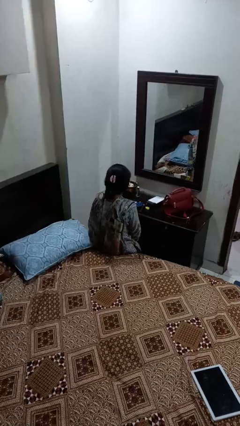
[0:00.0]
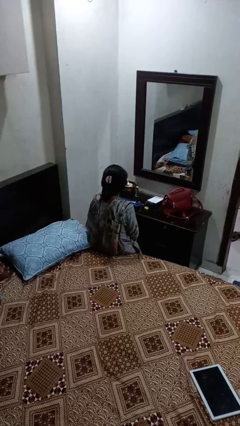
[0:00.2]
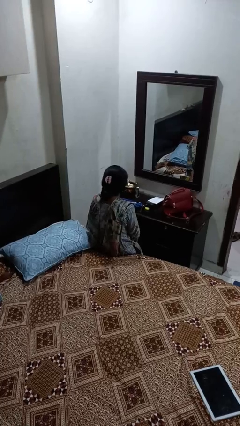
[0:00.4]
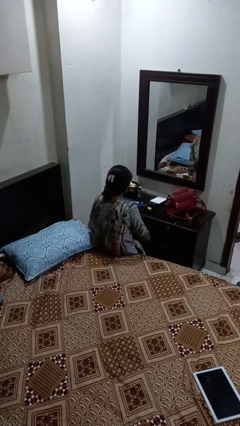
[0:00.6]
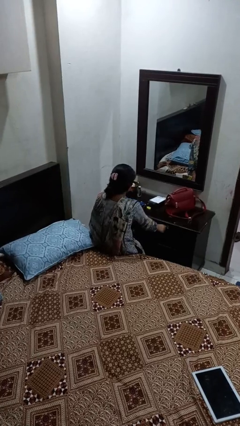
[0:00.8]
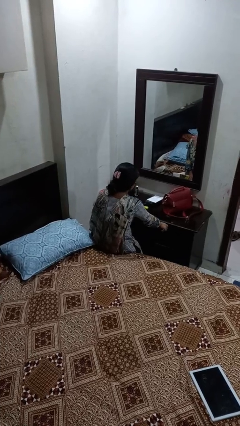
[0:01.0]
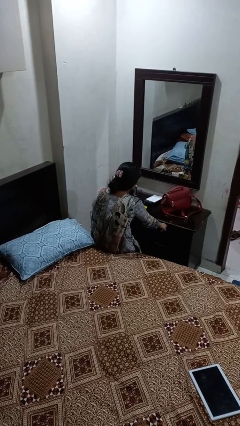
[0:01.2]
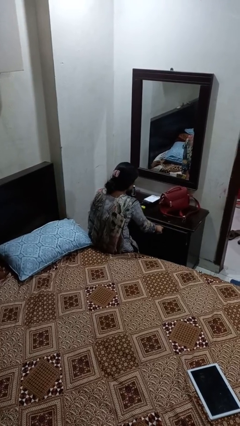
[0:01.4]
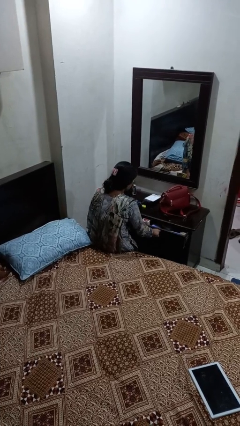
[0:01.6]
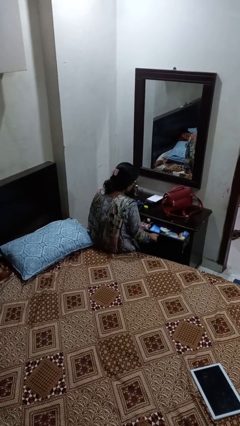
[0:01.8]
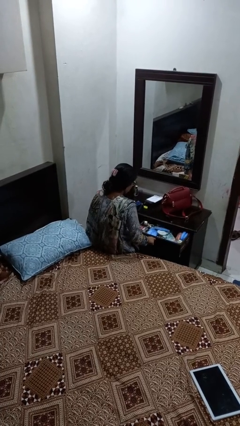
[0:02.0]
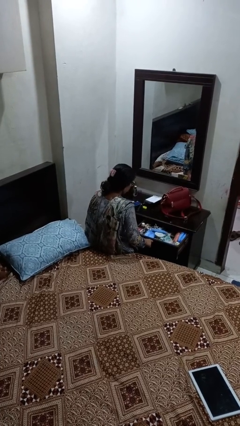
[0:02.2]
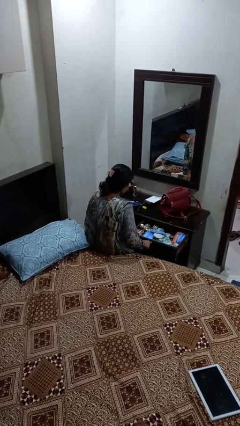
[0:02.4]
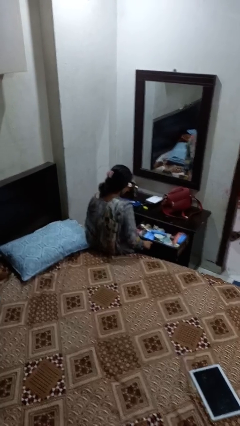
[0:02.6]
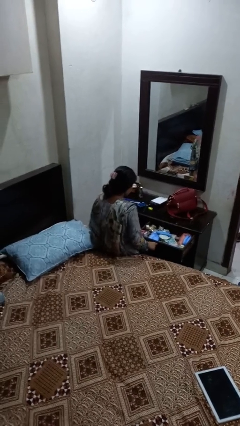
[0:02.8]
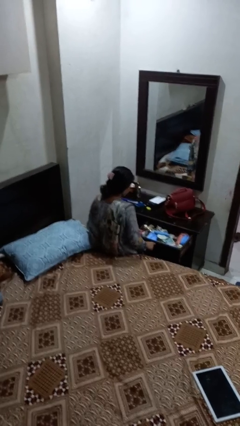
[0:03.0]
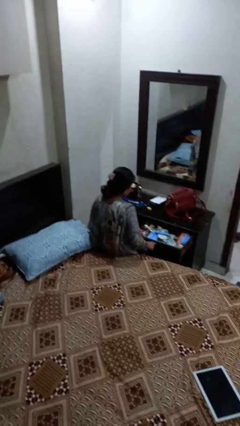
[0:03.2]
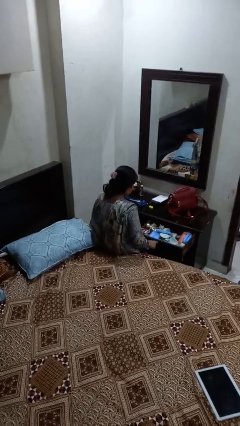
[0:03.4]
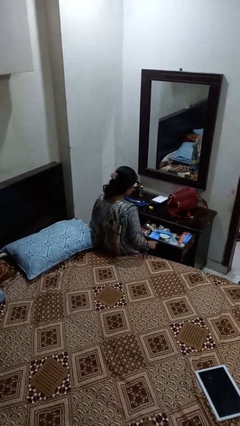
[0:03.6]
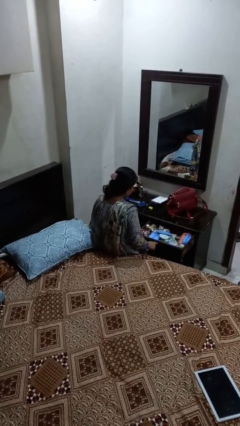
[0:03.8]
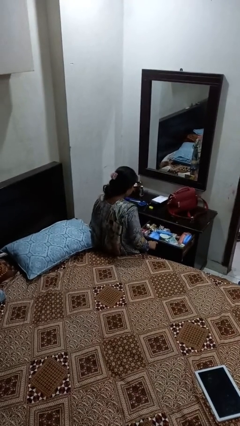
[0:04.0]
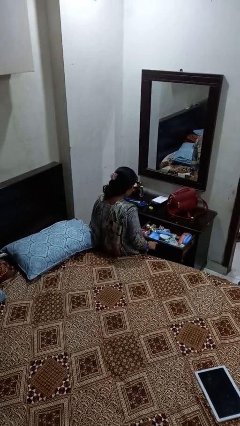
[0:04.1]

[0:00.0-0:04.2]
person opens dresser drawer

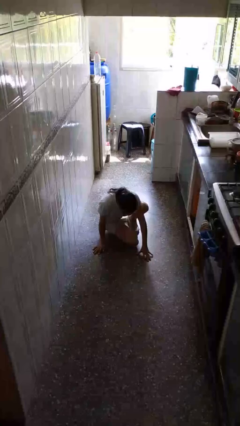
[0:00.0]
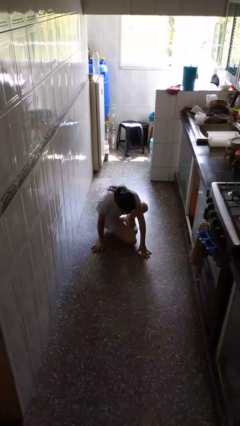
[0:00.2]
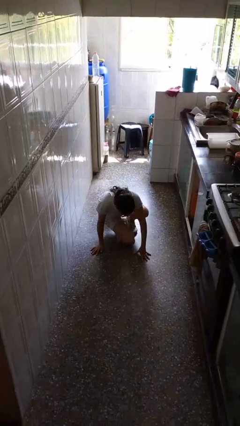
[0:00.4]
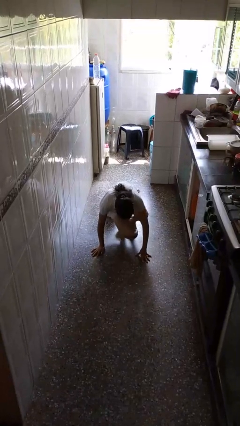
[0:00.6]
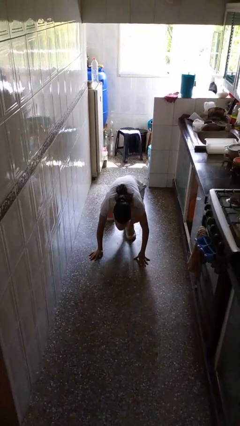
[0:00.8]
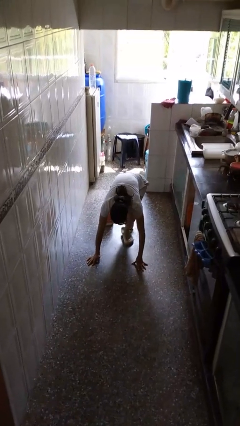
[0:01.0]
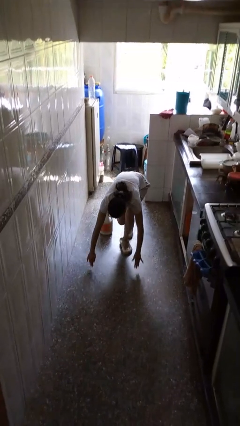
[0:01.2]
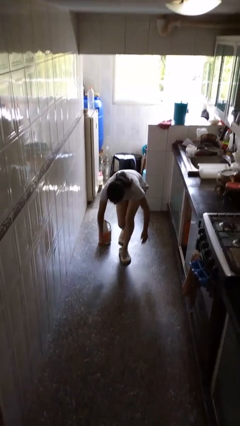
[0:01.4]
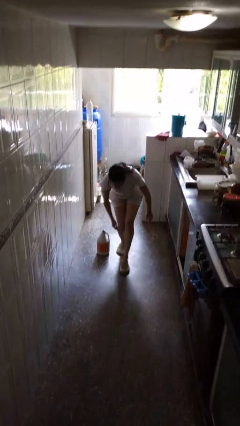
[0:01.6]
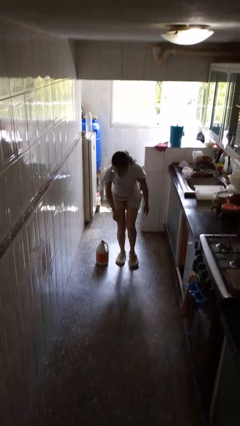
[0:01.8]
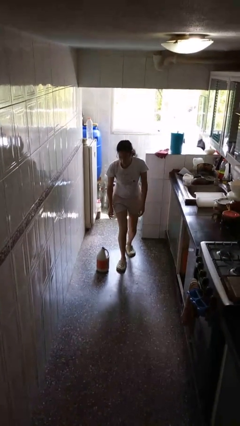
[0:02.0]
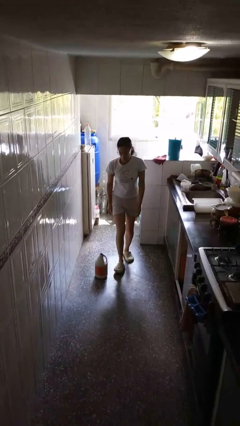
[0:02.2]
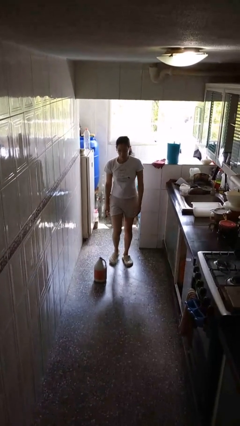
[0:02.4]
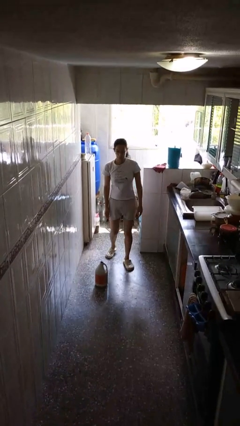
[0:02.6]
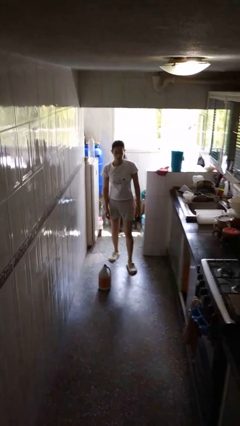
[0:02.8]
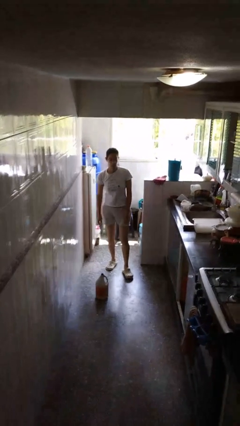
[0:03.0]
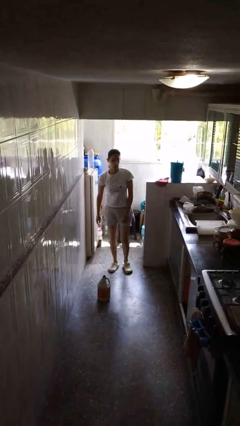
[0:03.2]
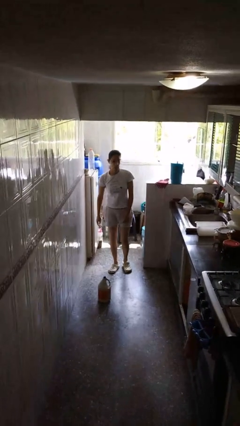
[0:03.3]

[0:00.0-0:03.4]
person stands up from floor

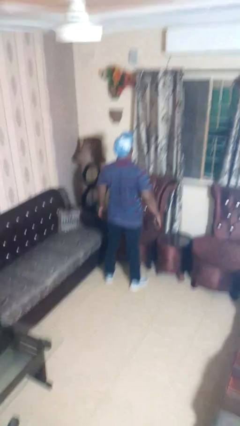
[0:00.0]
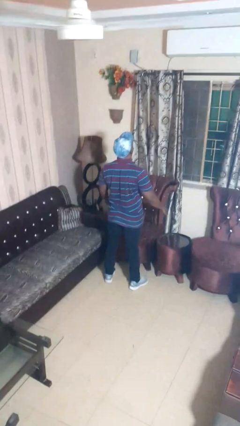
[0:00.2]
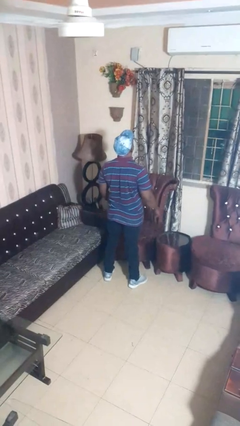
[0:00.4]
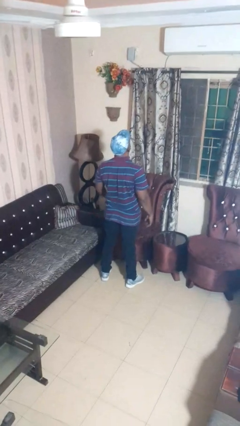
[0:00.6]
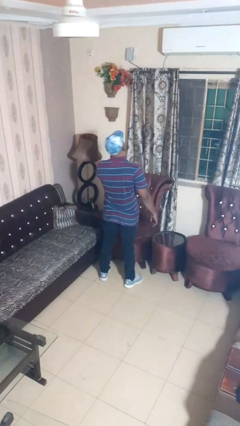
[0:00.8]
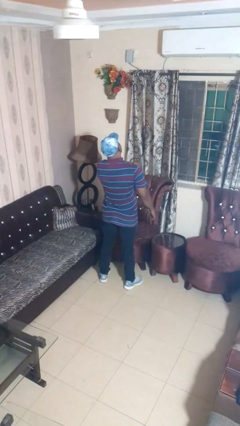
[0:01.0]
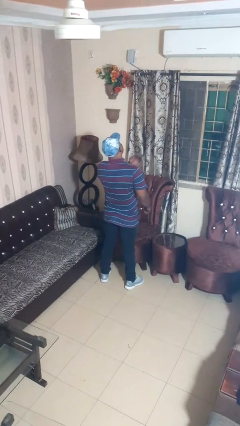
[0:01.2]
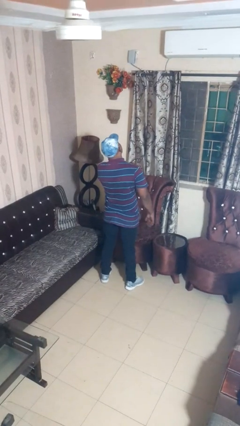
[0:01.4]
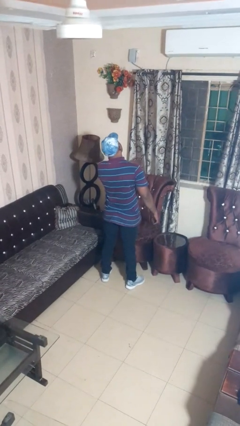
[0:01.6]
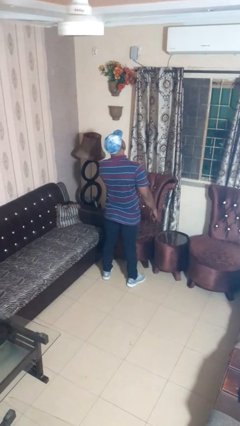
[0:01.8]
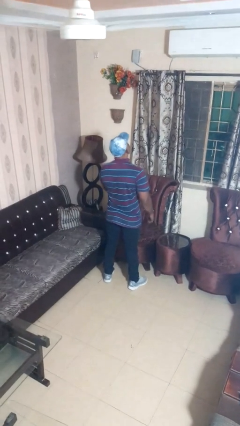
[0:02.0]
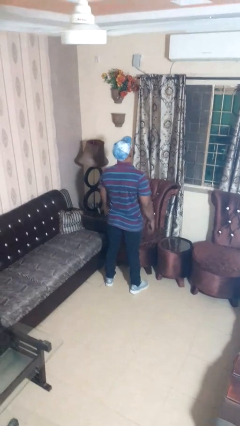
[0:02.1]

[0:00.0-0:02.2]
person drums on chest

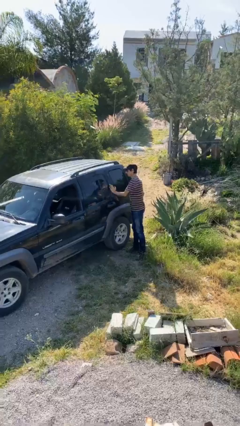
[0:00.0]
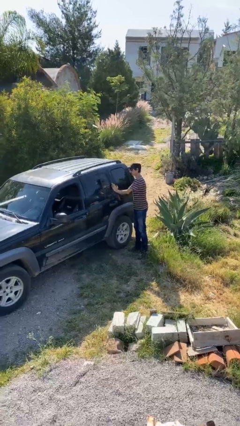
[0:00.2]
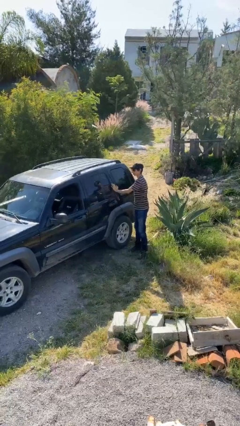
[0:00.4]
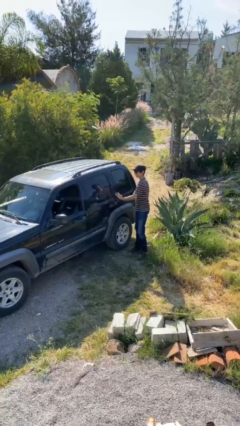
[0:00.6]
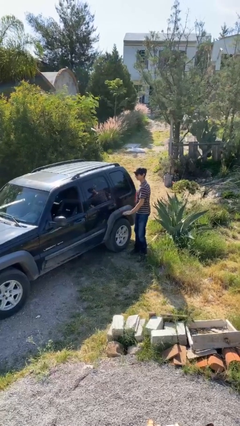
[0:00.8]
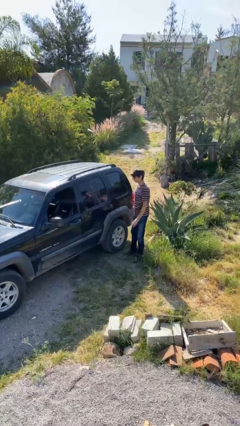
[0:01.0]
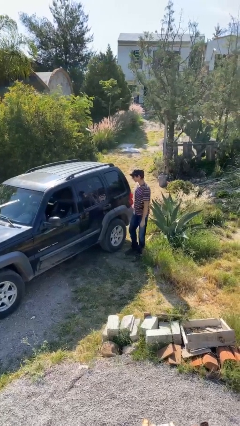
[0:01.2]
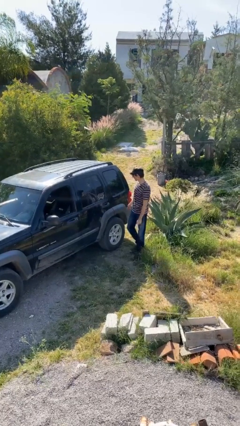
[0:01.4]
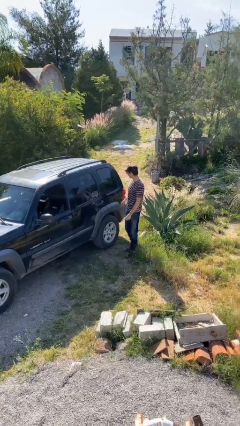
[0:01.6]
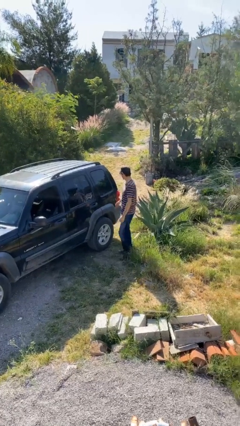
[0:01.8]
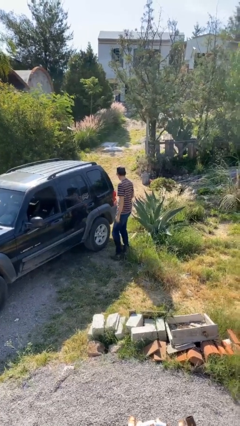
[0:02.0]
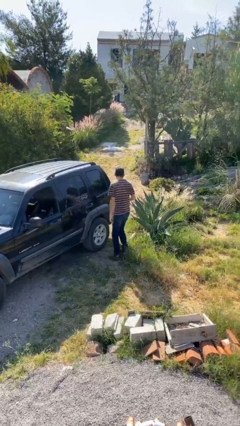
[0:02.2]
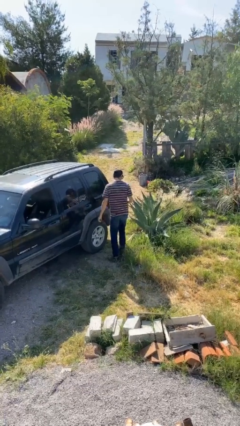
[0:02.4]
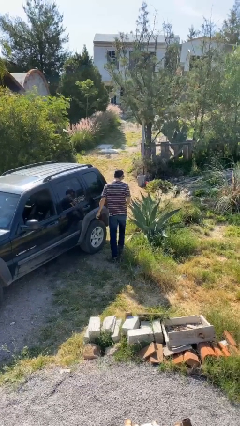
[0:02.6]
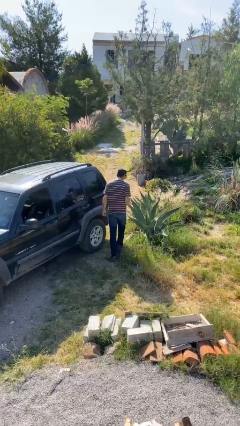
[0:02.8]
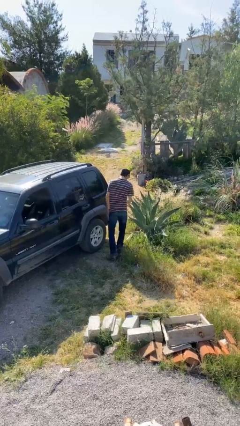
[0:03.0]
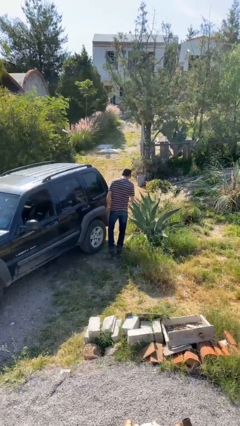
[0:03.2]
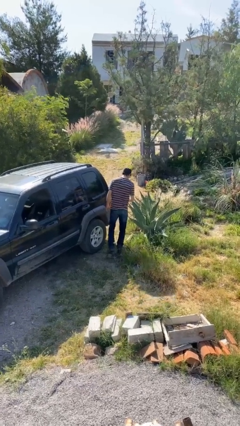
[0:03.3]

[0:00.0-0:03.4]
person closes car door

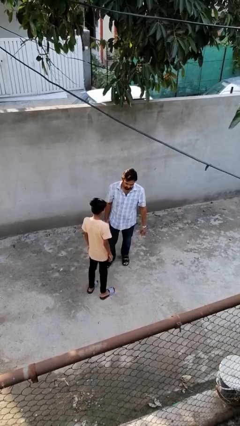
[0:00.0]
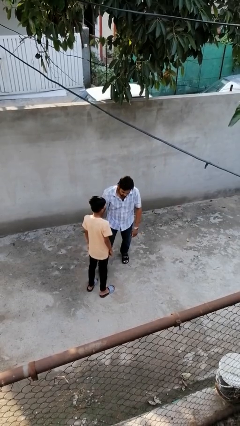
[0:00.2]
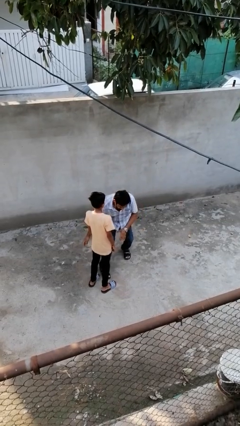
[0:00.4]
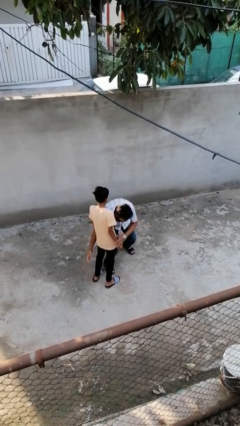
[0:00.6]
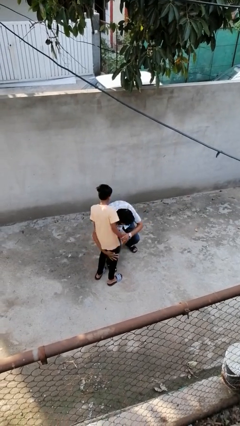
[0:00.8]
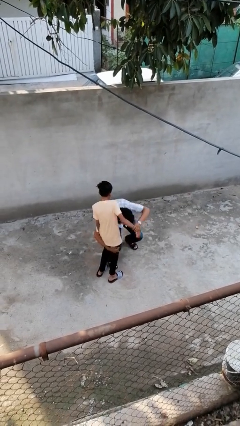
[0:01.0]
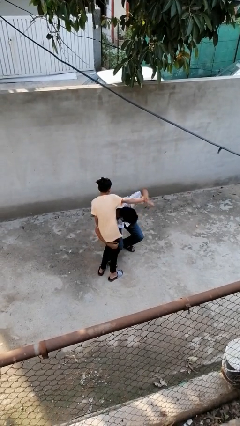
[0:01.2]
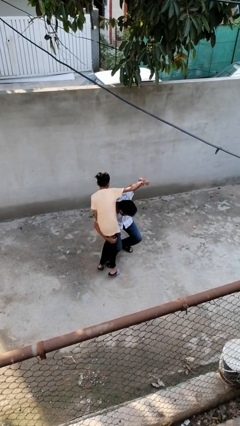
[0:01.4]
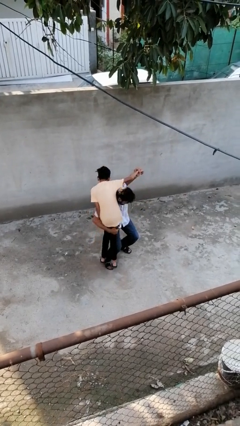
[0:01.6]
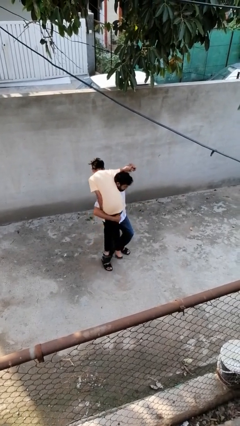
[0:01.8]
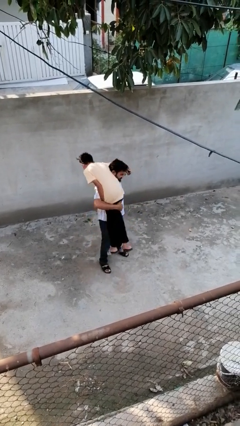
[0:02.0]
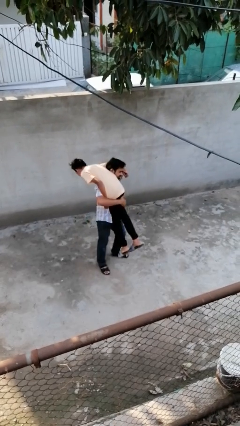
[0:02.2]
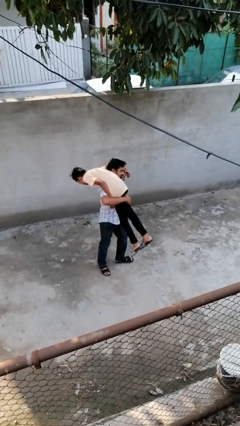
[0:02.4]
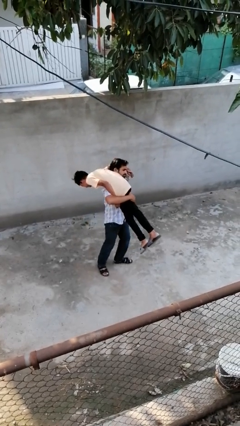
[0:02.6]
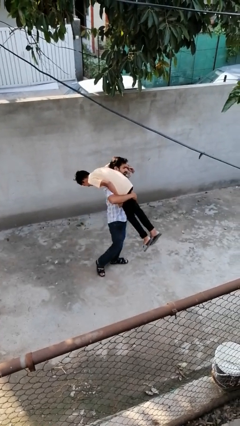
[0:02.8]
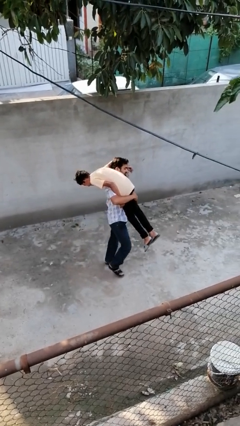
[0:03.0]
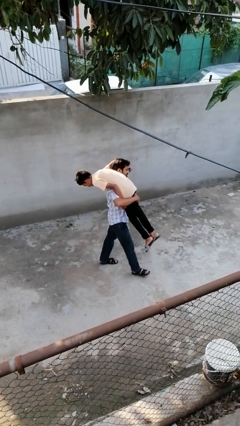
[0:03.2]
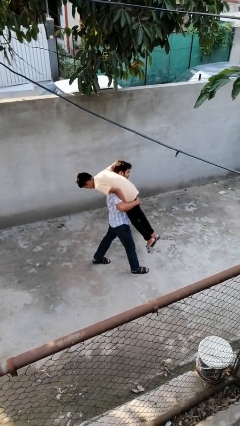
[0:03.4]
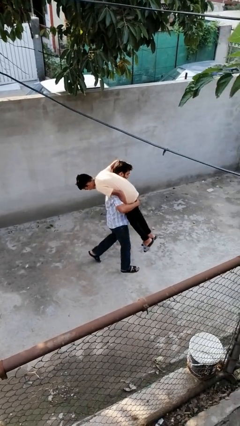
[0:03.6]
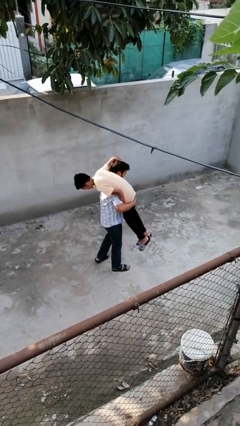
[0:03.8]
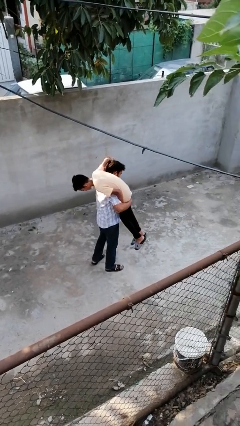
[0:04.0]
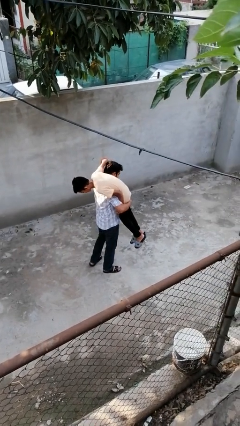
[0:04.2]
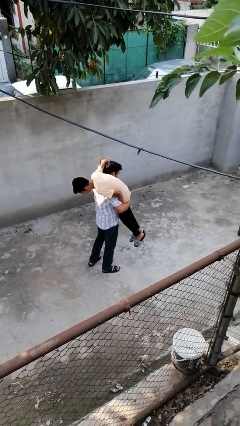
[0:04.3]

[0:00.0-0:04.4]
person carries person over shoulder

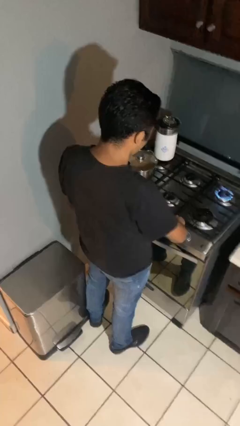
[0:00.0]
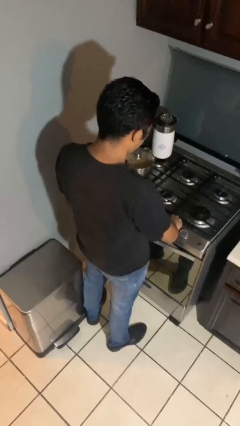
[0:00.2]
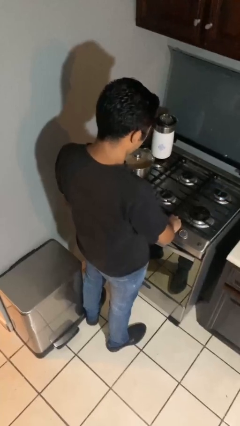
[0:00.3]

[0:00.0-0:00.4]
person turns off stovetop
